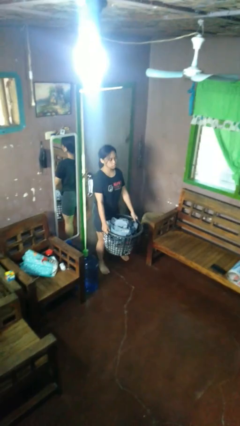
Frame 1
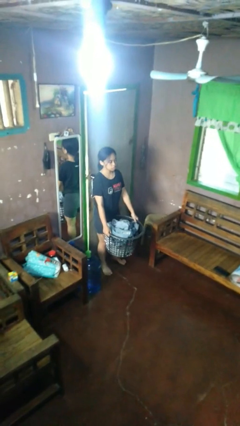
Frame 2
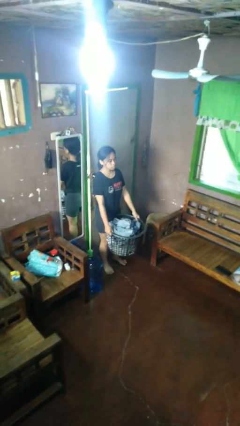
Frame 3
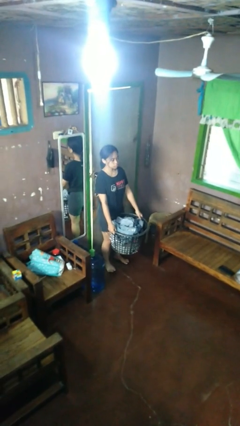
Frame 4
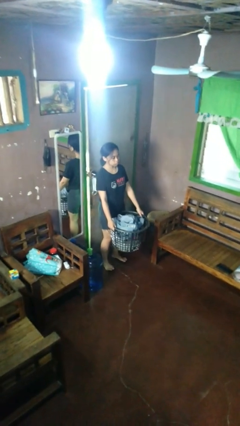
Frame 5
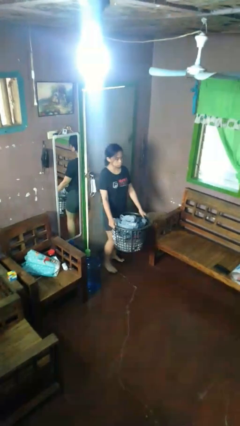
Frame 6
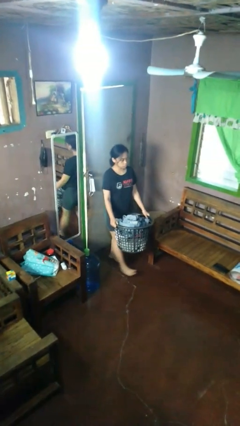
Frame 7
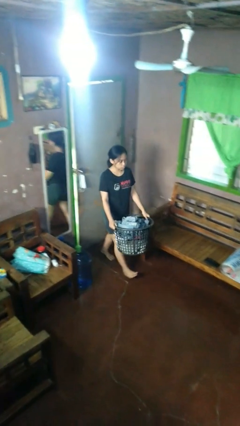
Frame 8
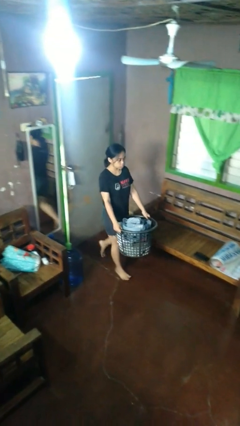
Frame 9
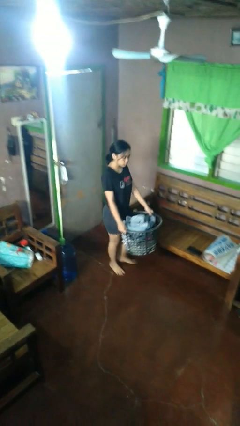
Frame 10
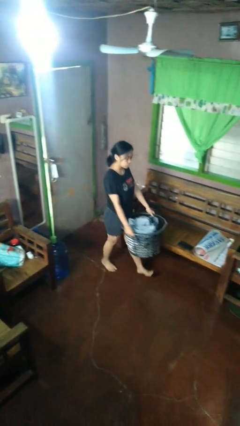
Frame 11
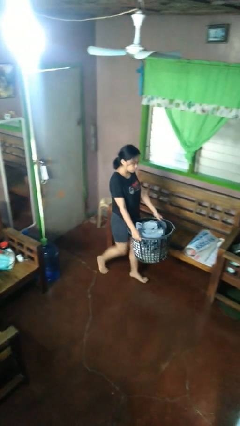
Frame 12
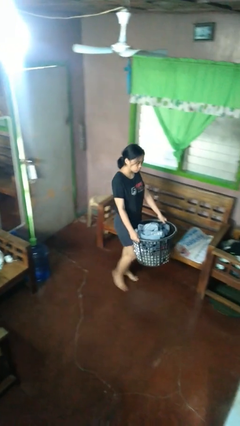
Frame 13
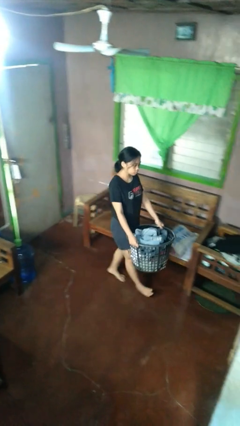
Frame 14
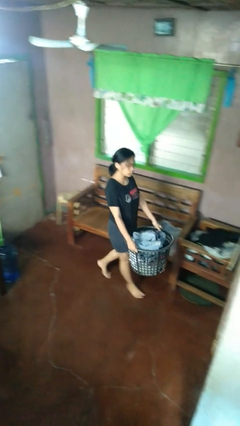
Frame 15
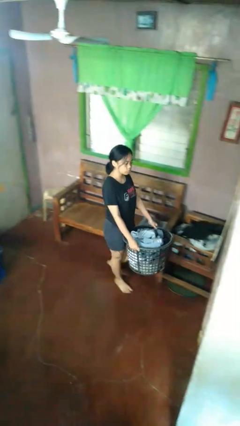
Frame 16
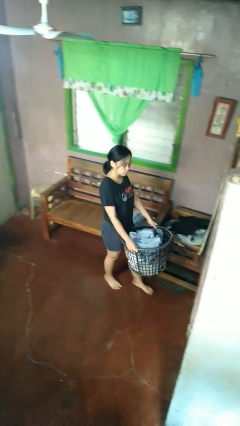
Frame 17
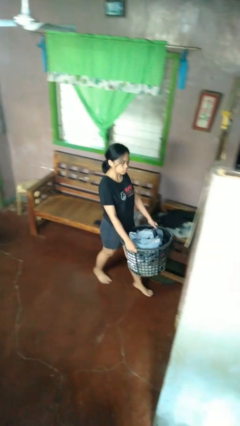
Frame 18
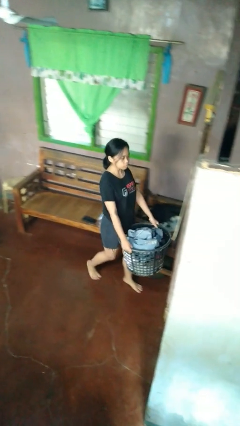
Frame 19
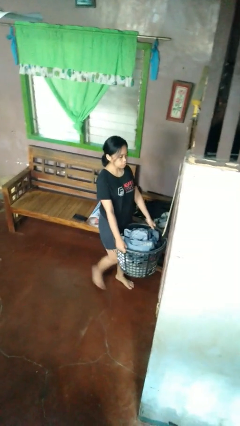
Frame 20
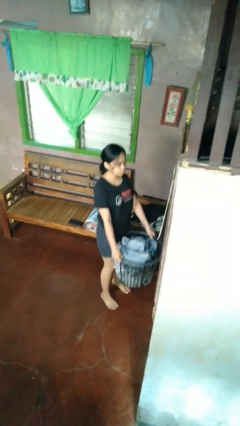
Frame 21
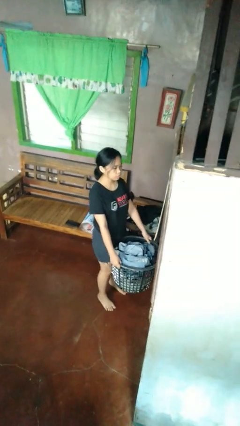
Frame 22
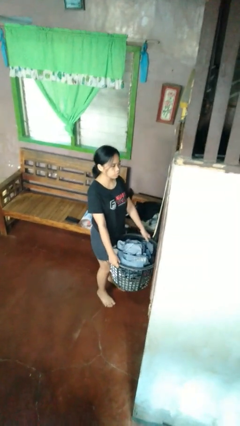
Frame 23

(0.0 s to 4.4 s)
person carries laundry basket

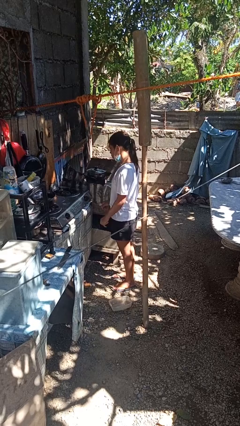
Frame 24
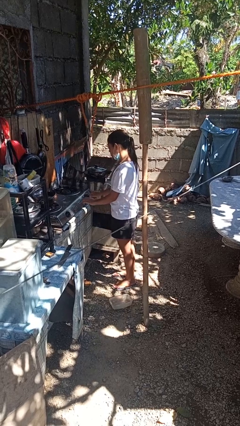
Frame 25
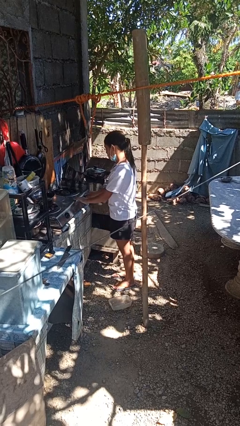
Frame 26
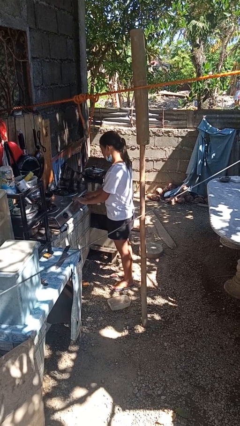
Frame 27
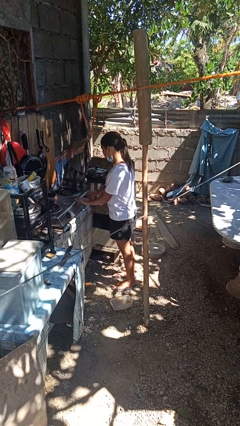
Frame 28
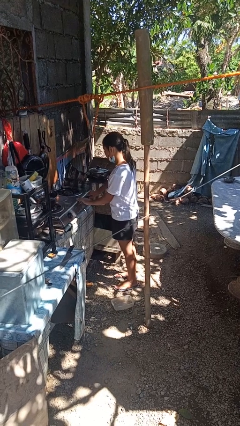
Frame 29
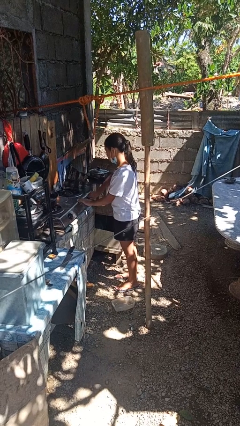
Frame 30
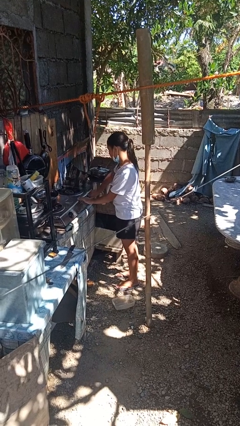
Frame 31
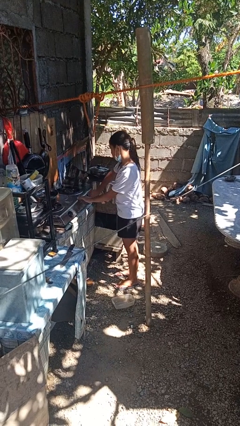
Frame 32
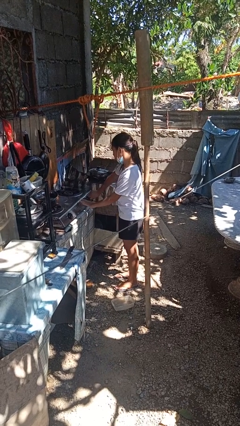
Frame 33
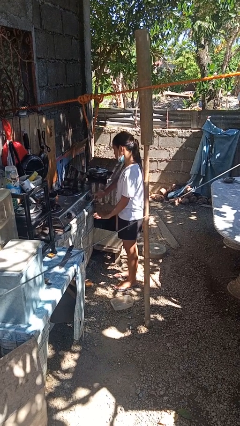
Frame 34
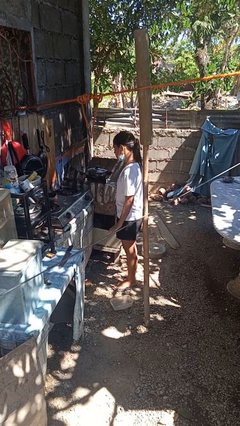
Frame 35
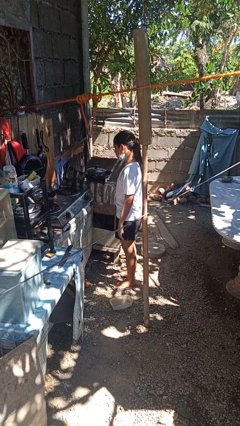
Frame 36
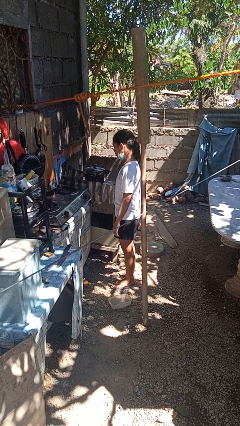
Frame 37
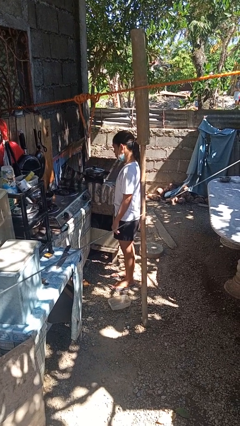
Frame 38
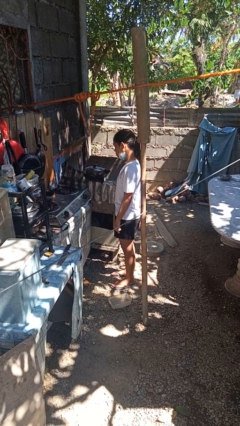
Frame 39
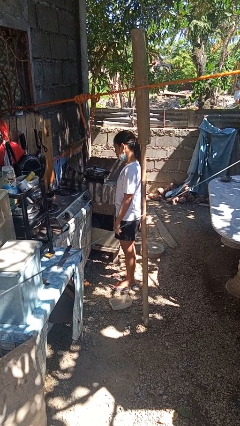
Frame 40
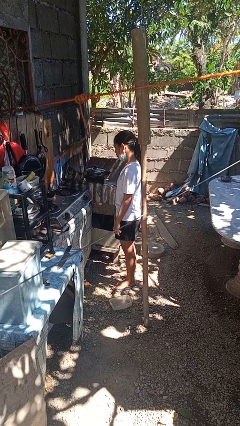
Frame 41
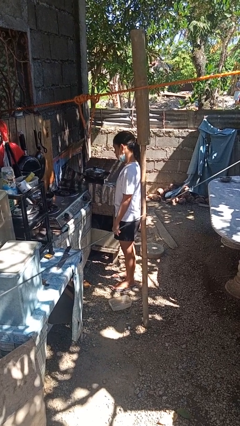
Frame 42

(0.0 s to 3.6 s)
person turns on stovetop

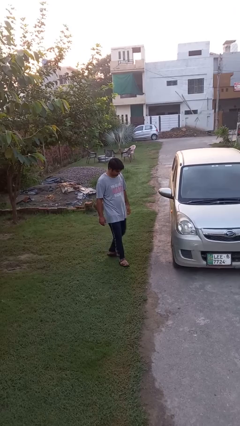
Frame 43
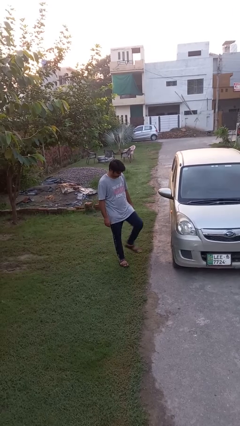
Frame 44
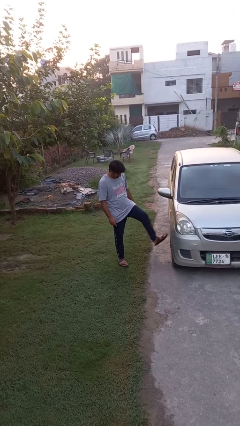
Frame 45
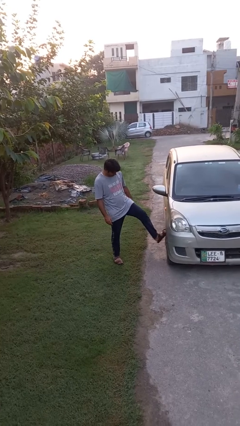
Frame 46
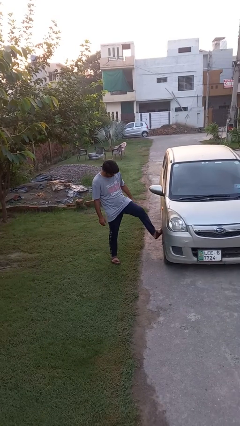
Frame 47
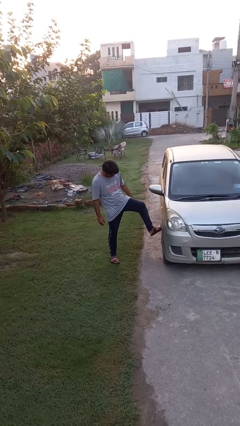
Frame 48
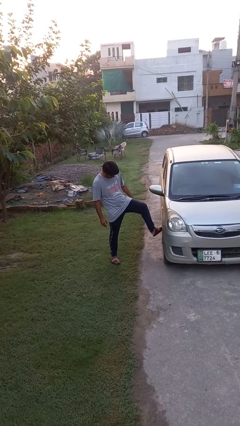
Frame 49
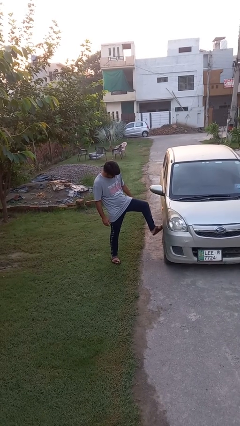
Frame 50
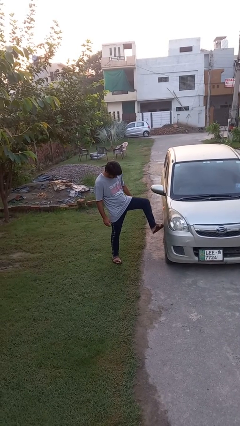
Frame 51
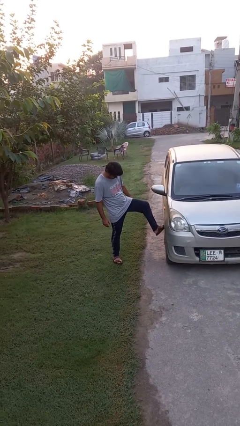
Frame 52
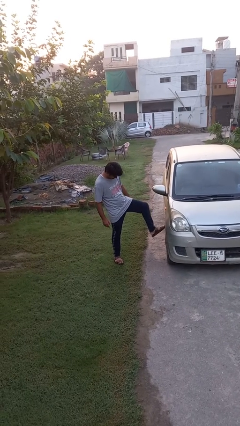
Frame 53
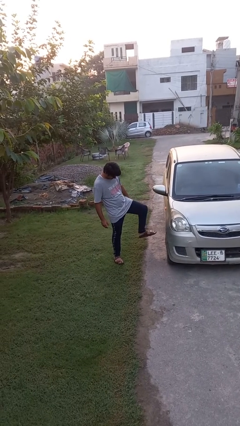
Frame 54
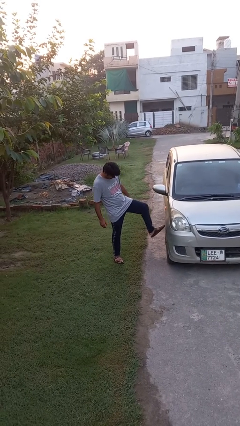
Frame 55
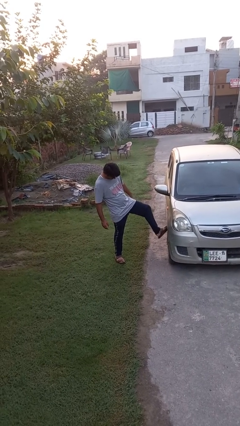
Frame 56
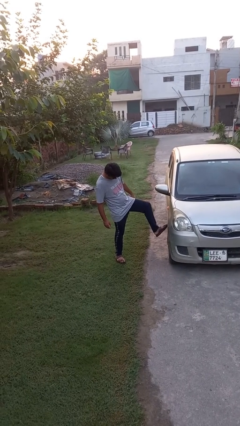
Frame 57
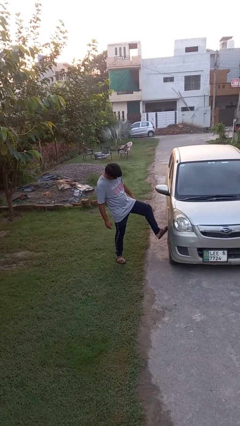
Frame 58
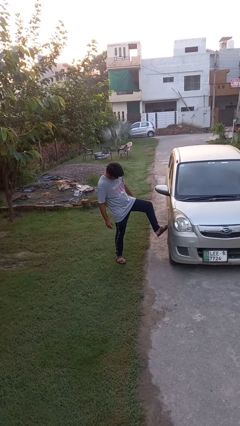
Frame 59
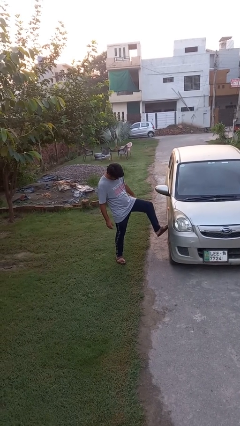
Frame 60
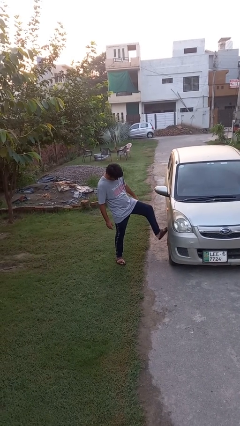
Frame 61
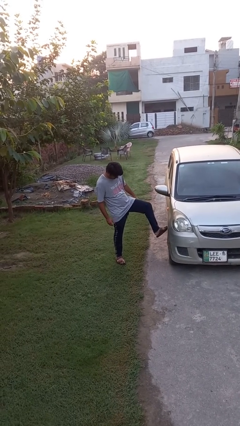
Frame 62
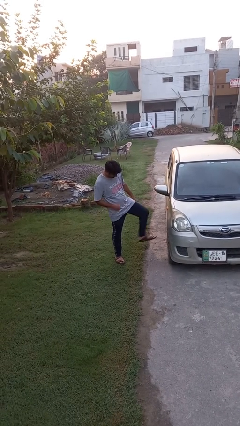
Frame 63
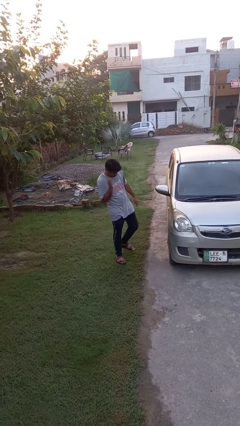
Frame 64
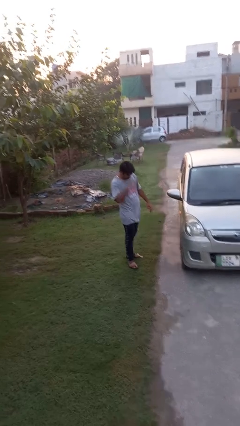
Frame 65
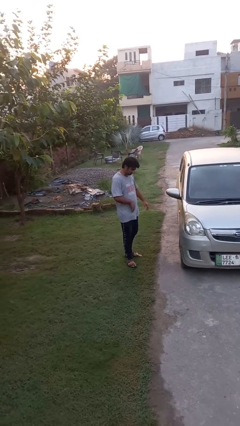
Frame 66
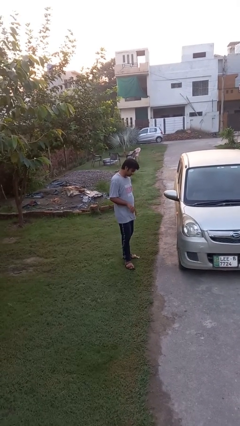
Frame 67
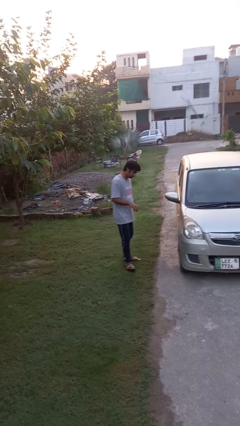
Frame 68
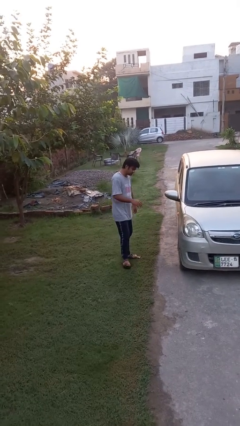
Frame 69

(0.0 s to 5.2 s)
person kicks car tires

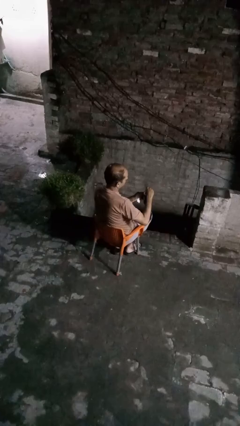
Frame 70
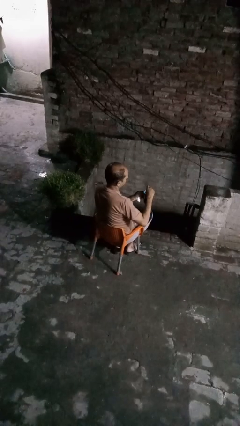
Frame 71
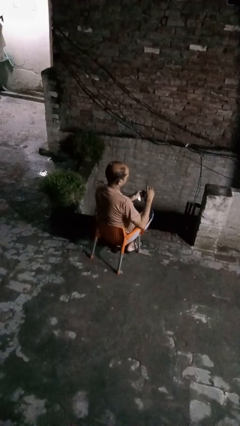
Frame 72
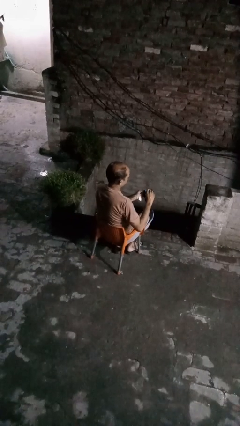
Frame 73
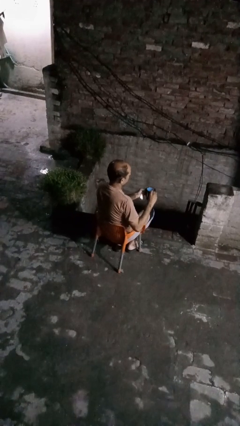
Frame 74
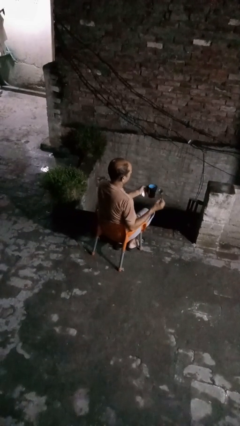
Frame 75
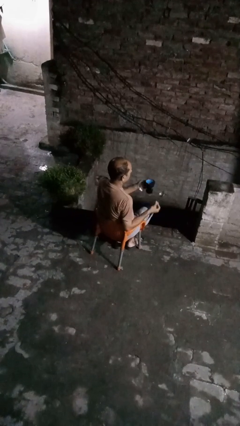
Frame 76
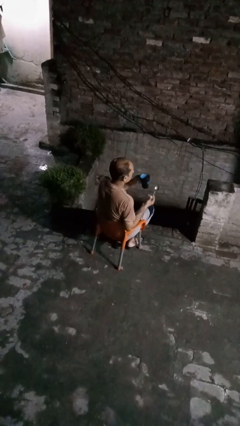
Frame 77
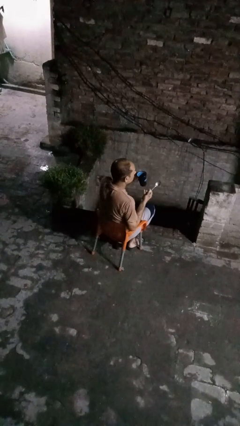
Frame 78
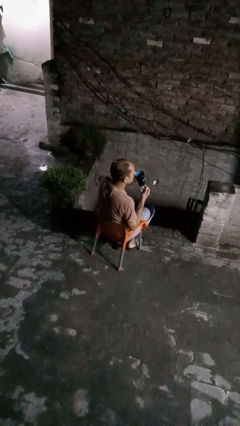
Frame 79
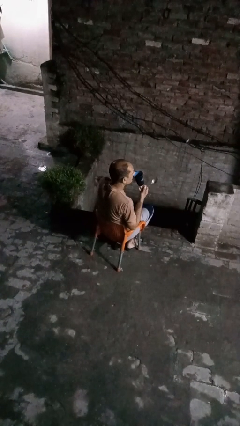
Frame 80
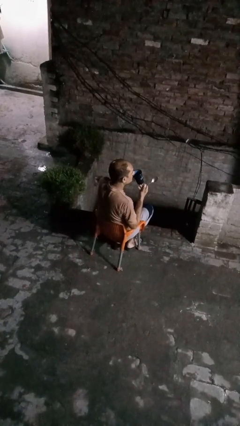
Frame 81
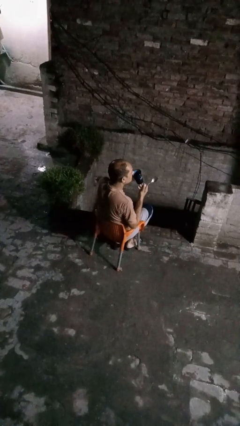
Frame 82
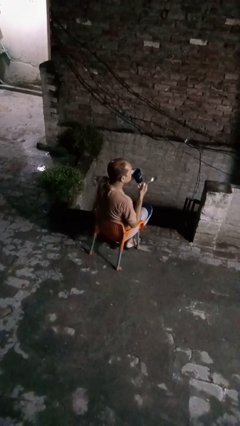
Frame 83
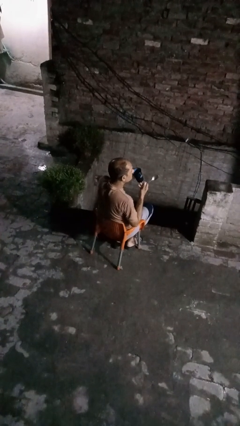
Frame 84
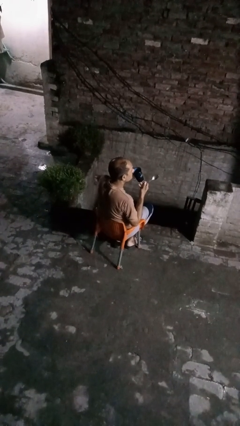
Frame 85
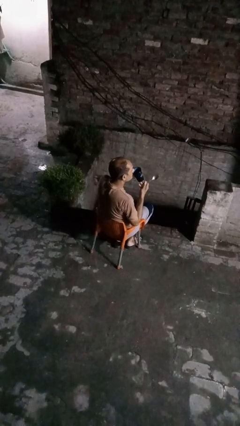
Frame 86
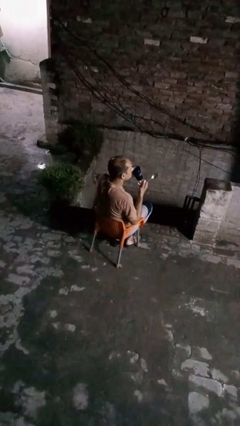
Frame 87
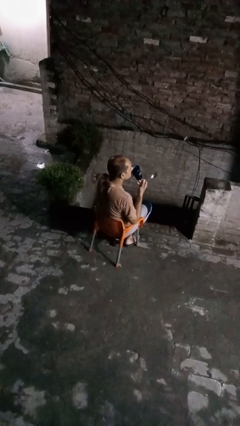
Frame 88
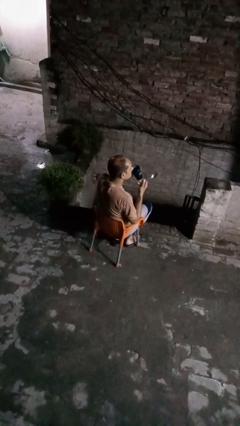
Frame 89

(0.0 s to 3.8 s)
person drinks from mug

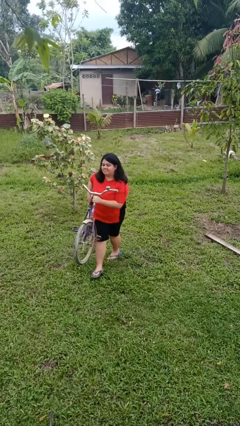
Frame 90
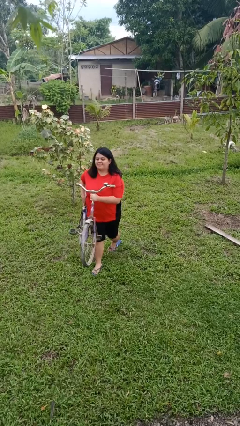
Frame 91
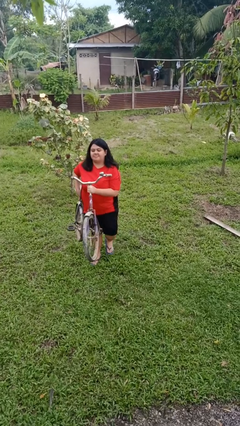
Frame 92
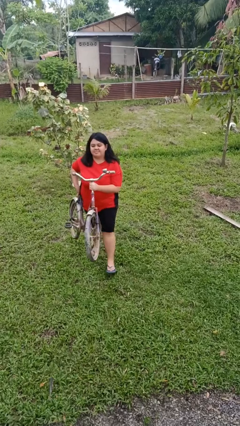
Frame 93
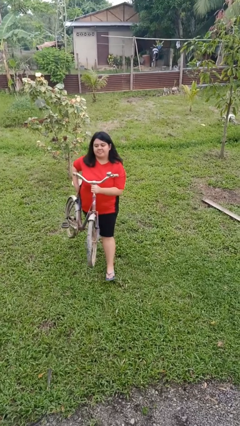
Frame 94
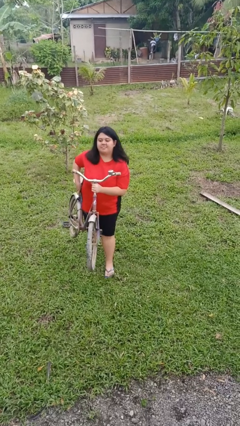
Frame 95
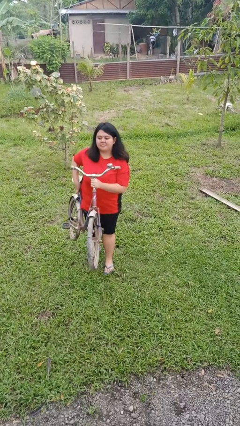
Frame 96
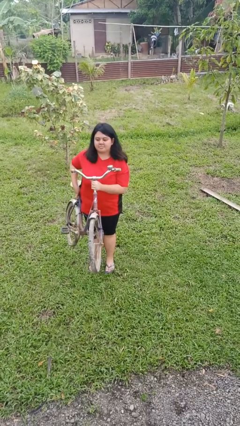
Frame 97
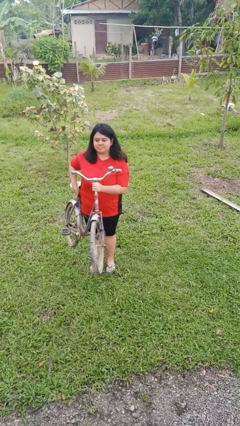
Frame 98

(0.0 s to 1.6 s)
person carries bicycle
